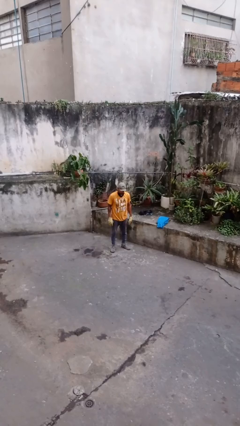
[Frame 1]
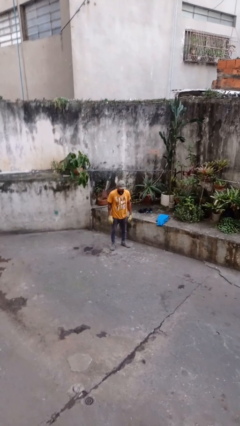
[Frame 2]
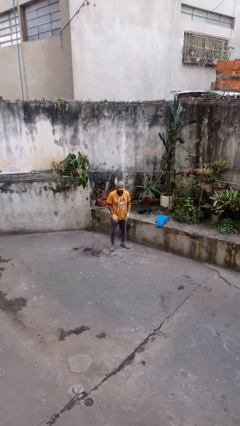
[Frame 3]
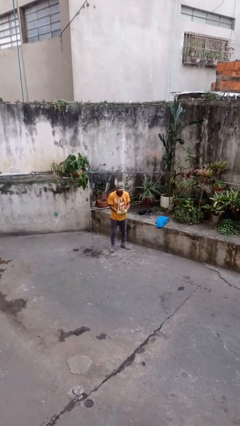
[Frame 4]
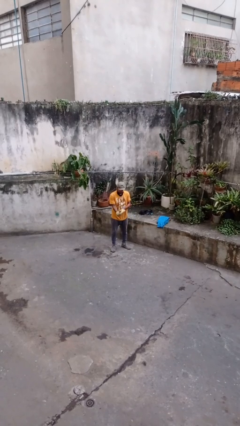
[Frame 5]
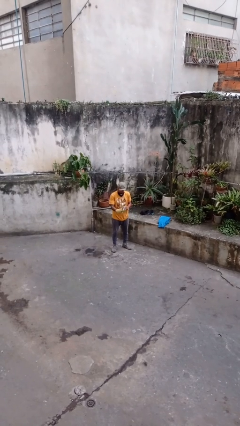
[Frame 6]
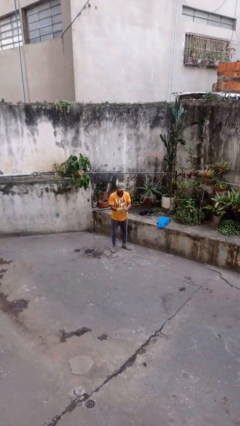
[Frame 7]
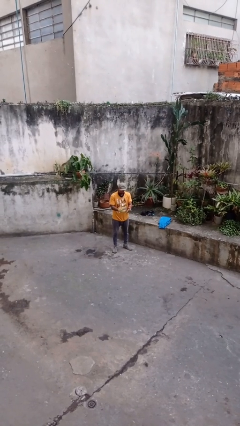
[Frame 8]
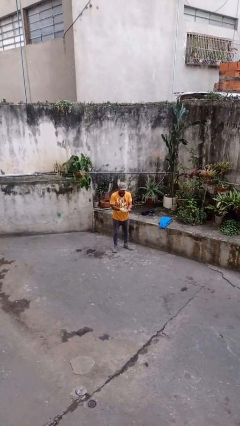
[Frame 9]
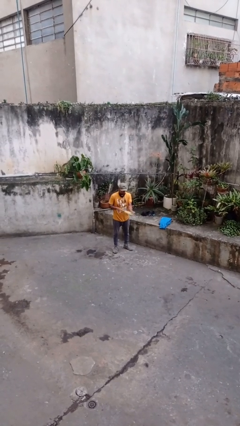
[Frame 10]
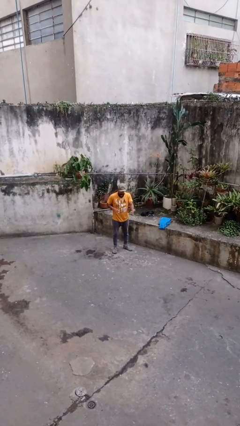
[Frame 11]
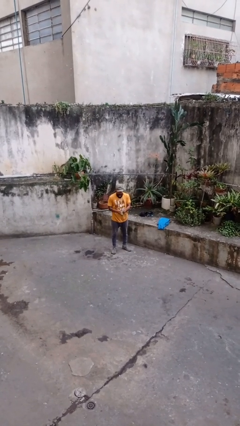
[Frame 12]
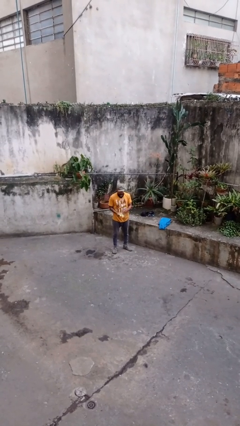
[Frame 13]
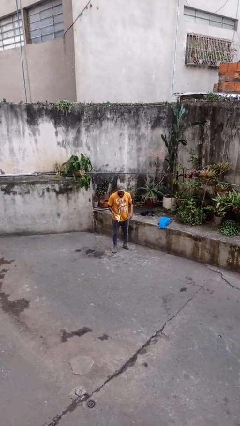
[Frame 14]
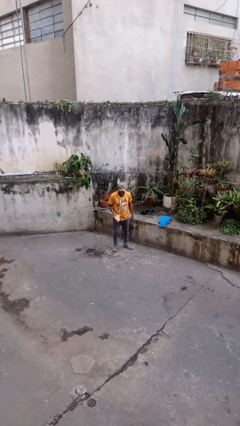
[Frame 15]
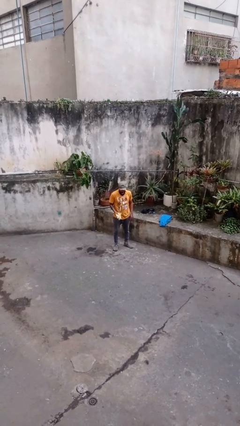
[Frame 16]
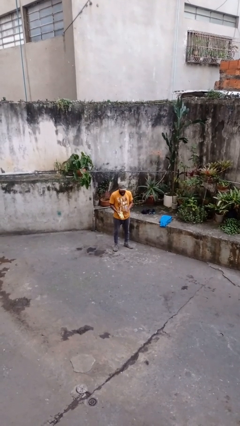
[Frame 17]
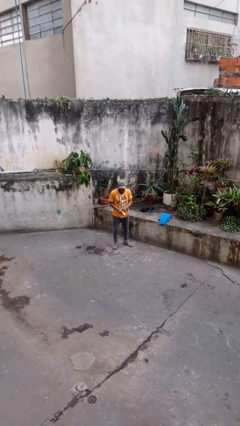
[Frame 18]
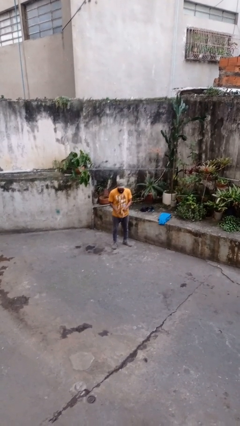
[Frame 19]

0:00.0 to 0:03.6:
person takes off gloves

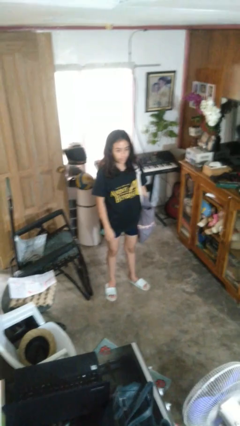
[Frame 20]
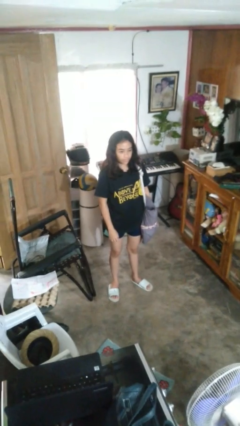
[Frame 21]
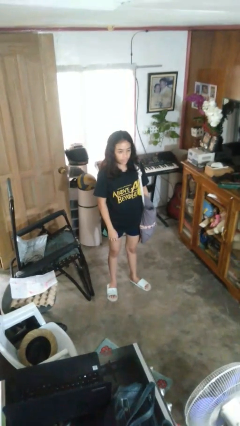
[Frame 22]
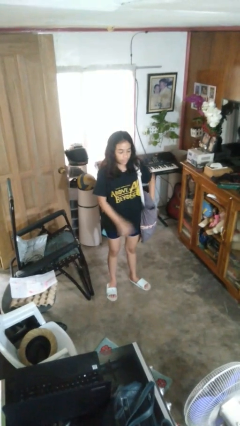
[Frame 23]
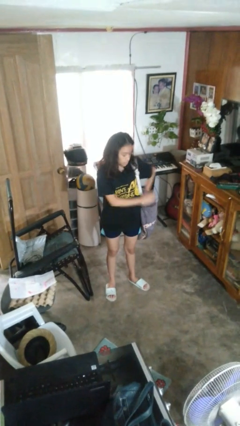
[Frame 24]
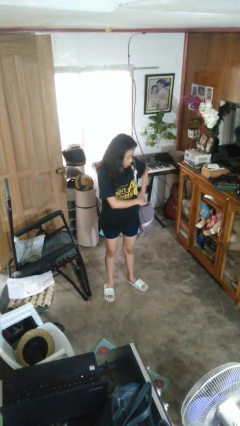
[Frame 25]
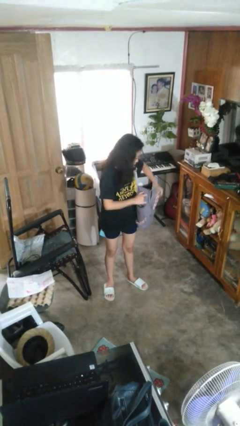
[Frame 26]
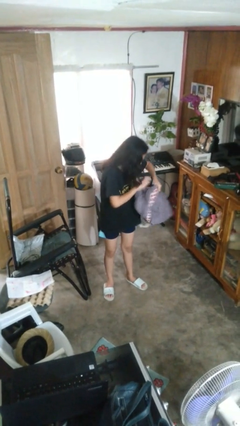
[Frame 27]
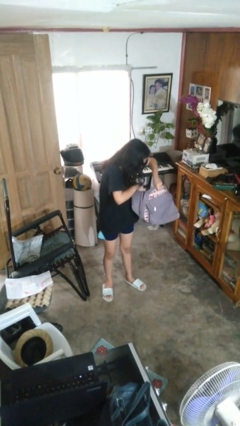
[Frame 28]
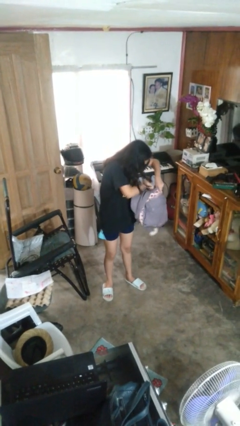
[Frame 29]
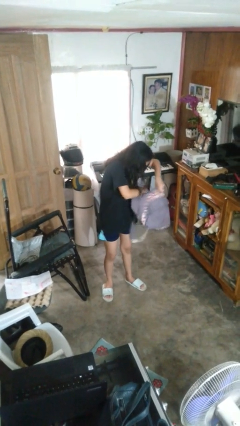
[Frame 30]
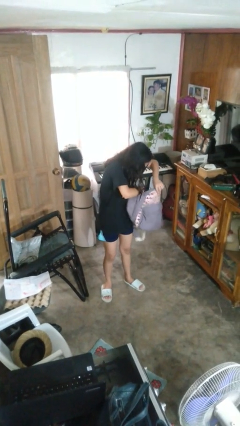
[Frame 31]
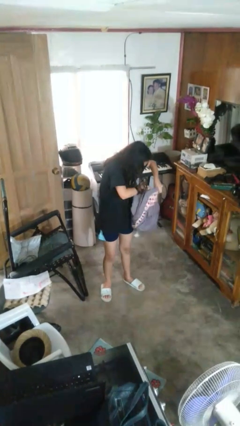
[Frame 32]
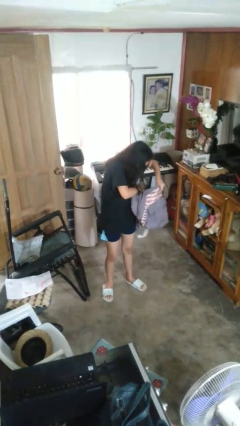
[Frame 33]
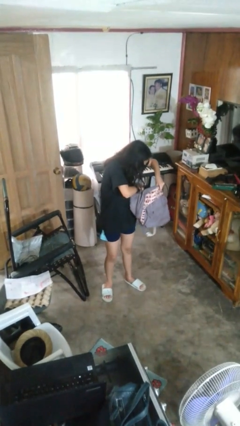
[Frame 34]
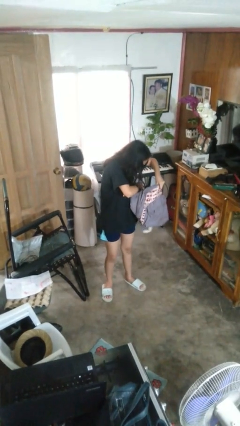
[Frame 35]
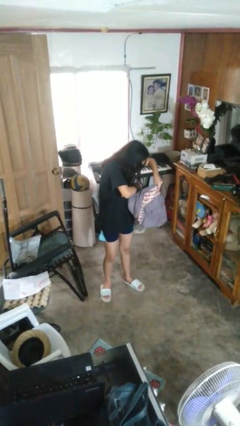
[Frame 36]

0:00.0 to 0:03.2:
person searches in backpack

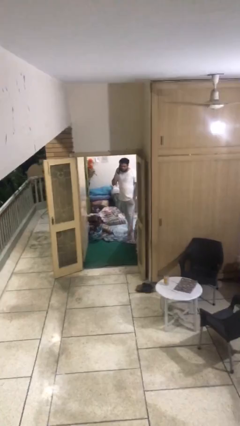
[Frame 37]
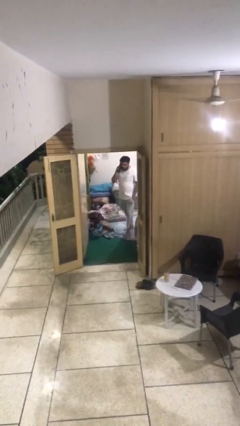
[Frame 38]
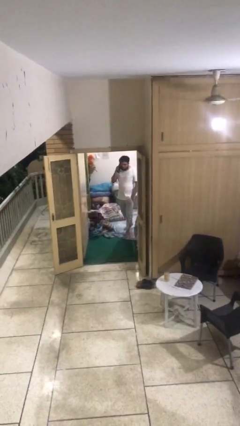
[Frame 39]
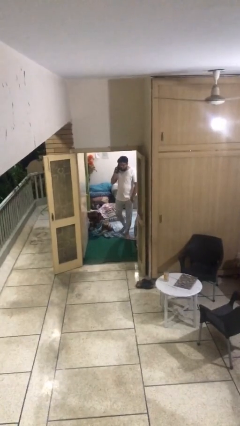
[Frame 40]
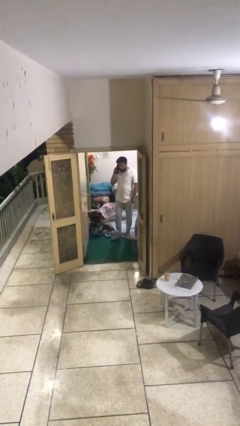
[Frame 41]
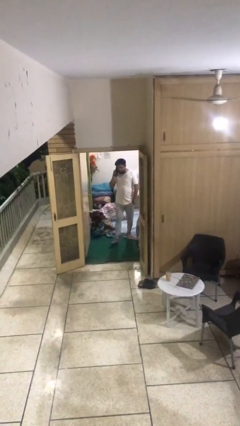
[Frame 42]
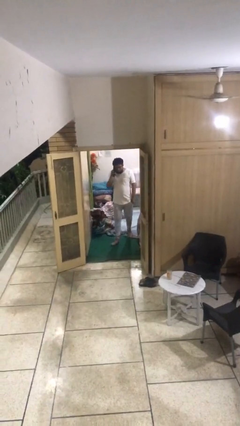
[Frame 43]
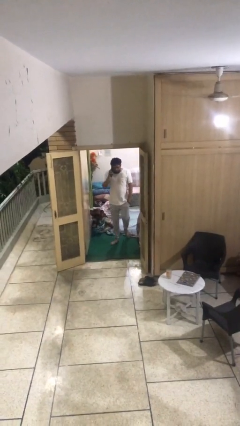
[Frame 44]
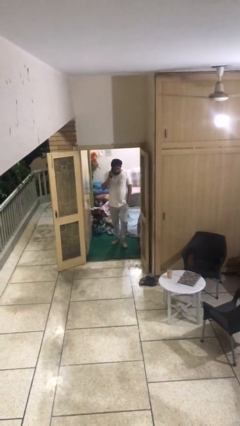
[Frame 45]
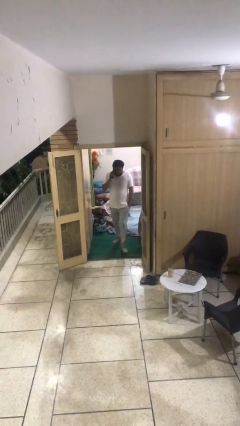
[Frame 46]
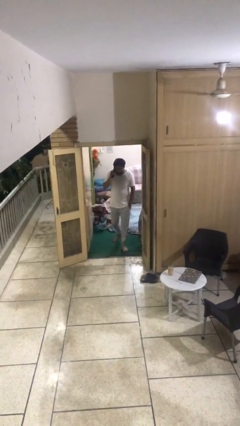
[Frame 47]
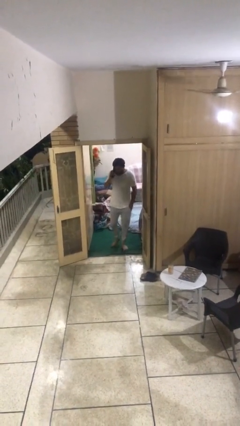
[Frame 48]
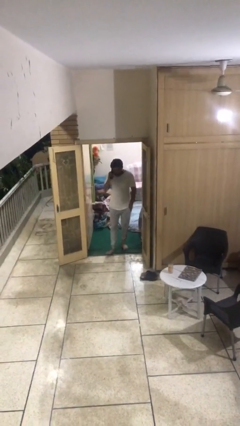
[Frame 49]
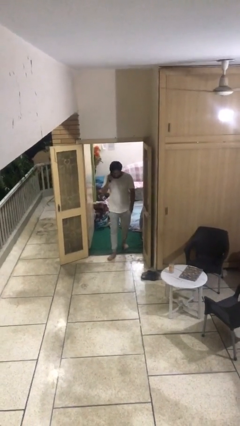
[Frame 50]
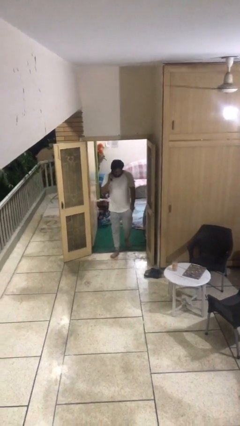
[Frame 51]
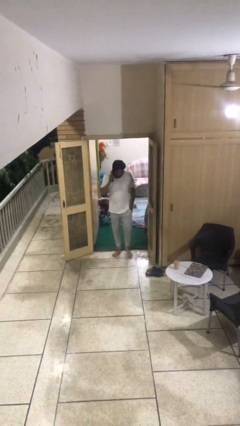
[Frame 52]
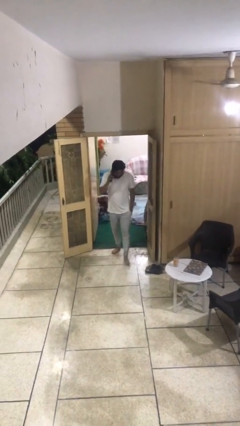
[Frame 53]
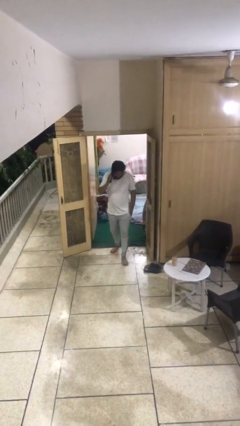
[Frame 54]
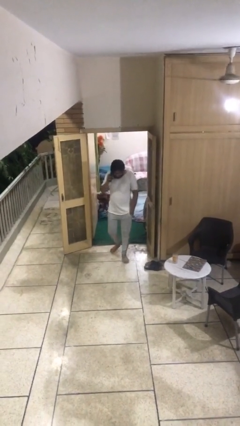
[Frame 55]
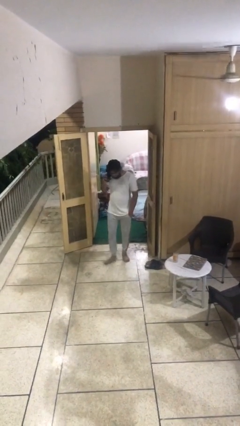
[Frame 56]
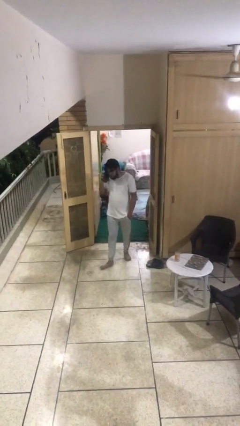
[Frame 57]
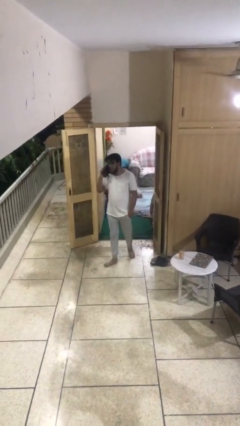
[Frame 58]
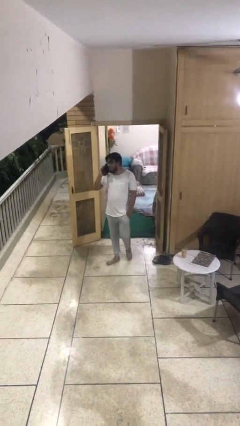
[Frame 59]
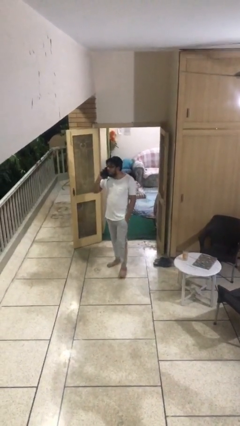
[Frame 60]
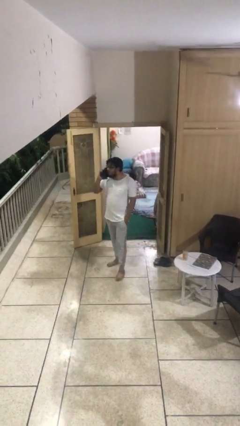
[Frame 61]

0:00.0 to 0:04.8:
person enters scene through structure

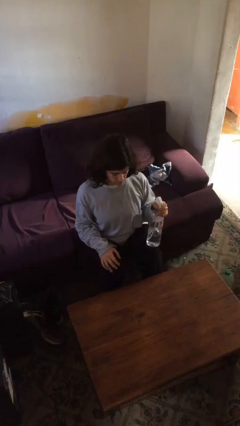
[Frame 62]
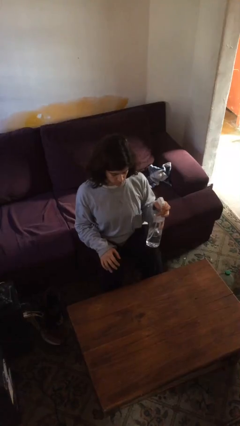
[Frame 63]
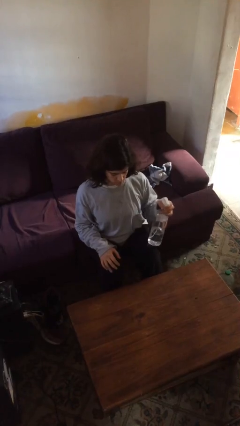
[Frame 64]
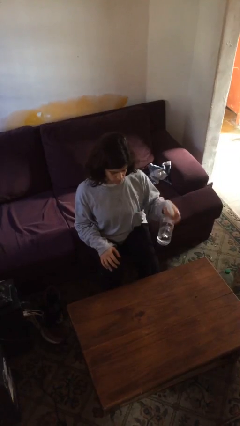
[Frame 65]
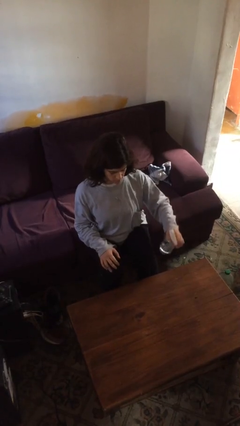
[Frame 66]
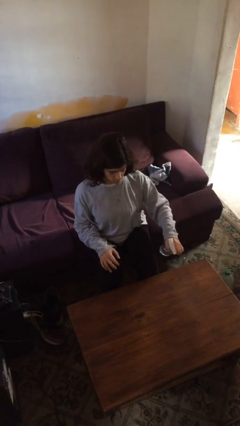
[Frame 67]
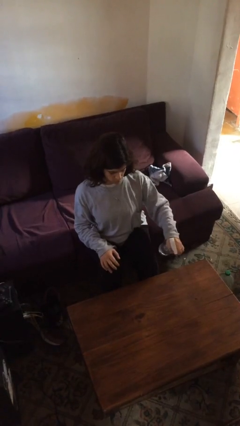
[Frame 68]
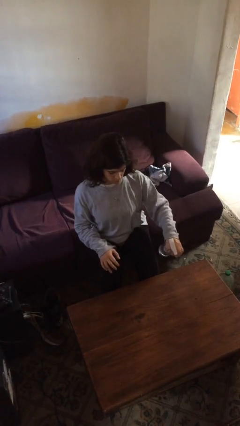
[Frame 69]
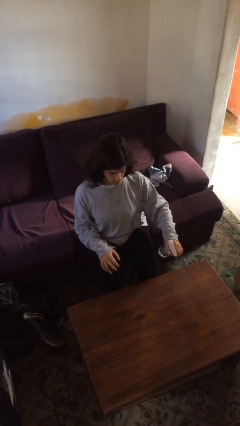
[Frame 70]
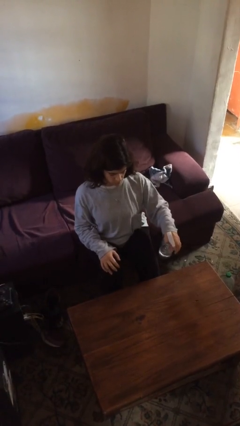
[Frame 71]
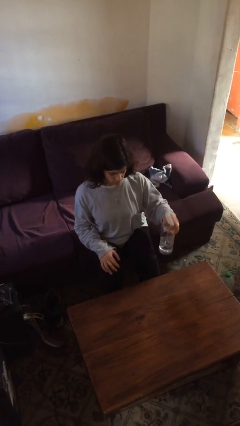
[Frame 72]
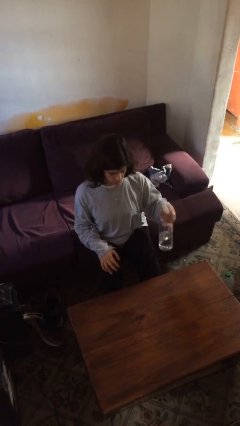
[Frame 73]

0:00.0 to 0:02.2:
person sprays from bottle

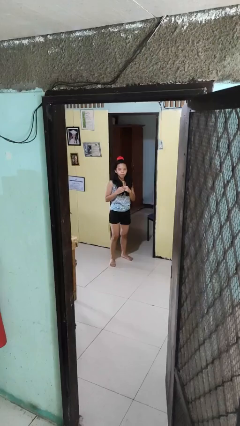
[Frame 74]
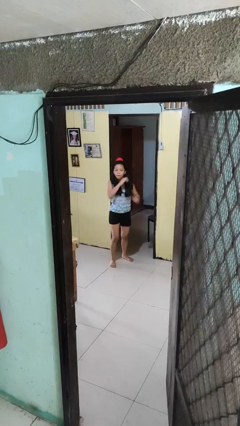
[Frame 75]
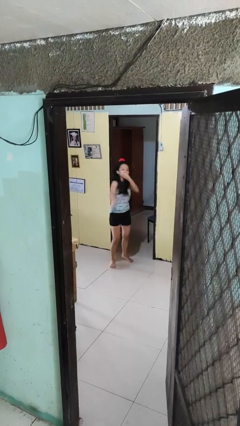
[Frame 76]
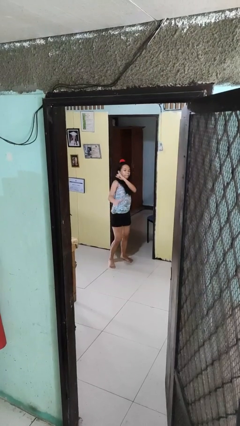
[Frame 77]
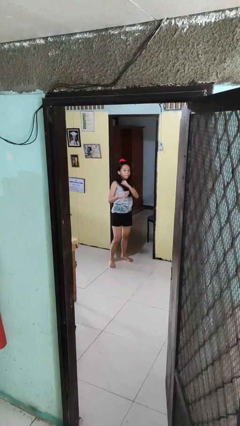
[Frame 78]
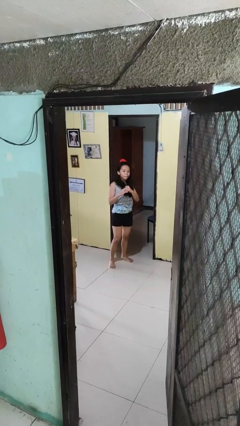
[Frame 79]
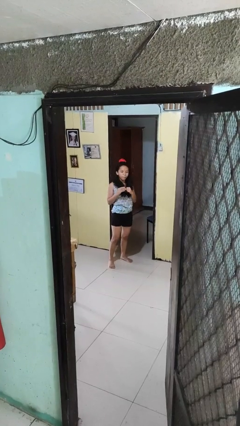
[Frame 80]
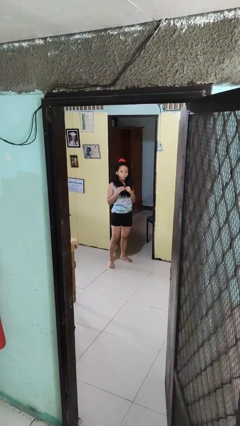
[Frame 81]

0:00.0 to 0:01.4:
person karate chop

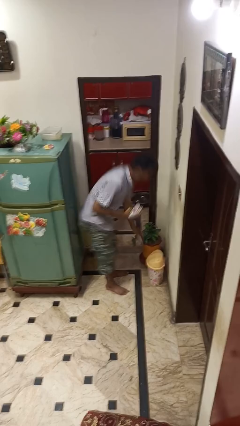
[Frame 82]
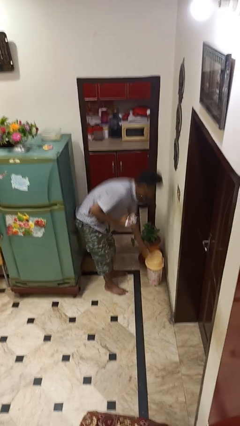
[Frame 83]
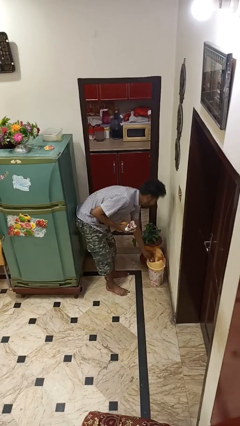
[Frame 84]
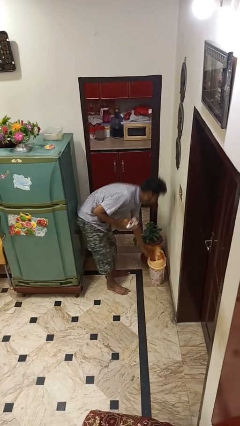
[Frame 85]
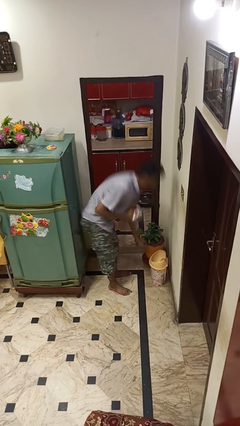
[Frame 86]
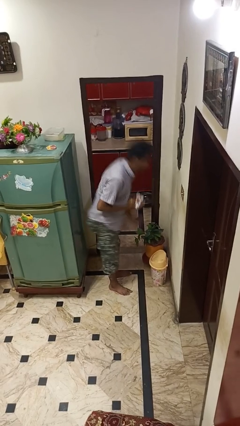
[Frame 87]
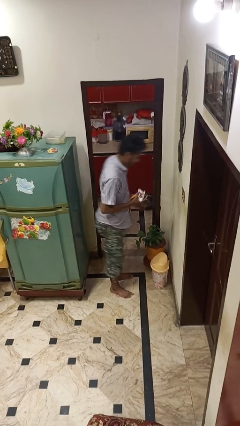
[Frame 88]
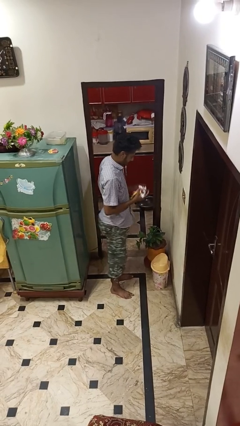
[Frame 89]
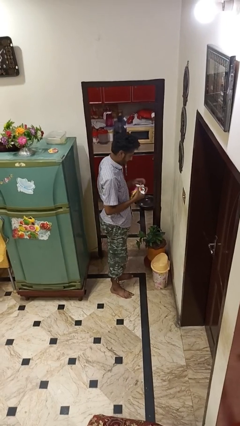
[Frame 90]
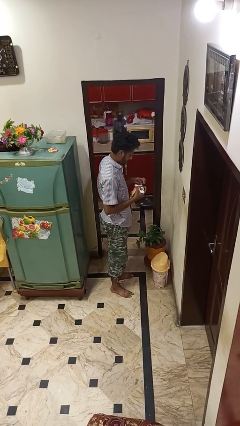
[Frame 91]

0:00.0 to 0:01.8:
person discards trash

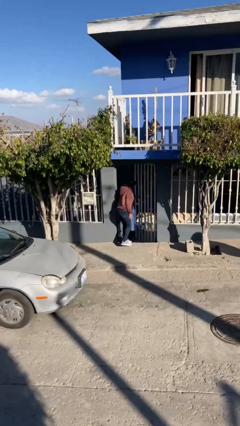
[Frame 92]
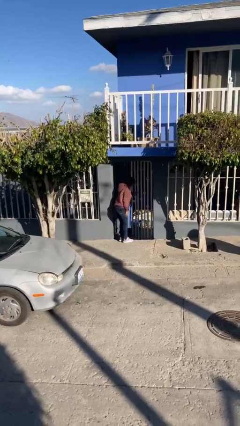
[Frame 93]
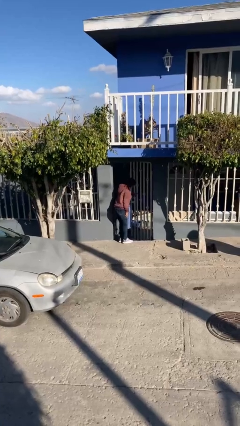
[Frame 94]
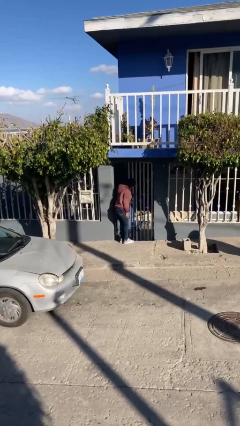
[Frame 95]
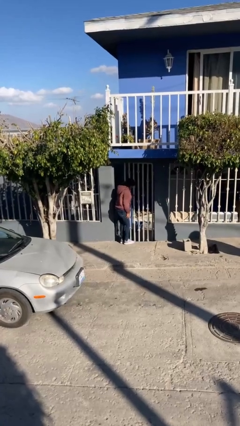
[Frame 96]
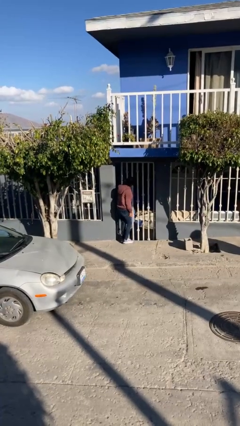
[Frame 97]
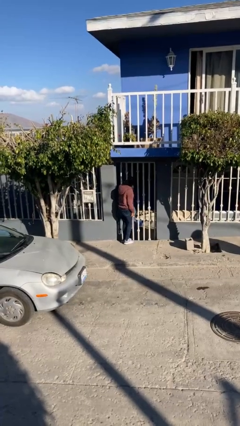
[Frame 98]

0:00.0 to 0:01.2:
person closes facility door
